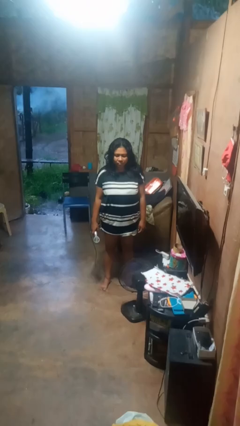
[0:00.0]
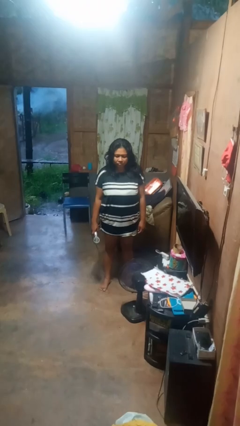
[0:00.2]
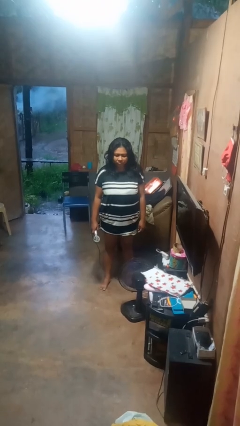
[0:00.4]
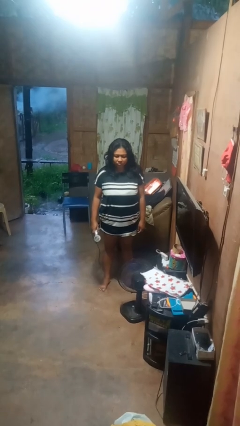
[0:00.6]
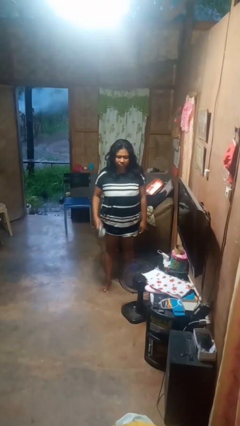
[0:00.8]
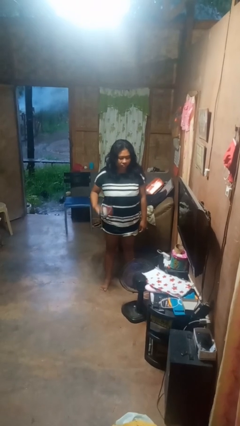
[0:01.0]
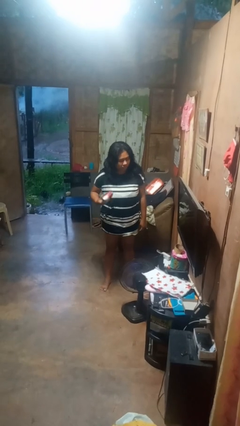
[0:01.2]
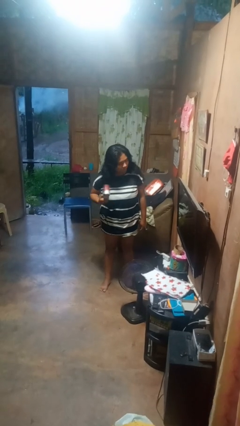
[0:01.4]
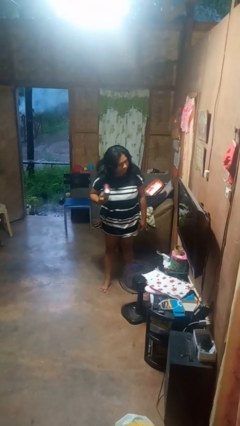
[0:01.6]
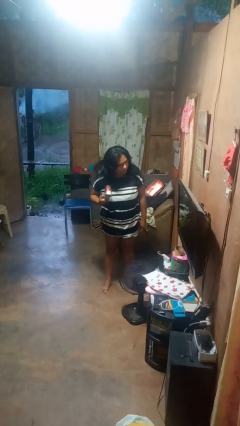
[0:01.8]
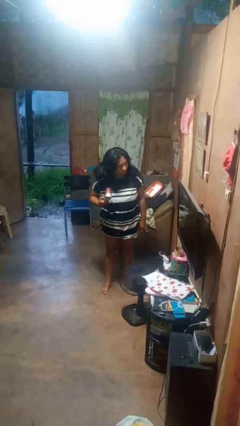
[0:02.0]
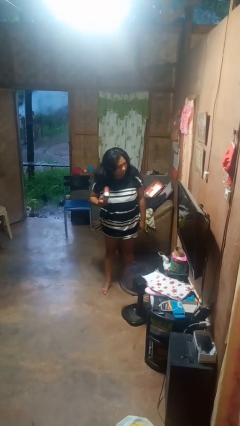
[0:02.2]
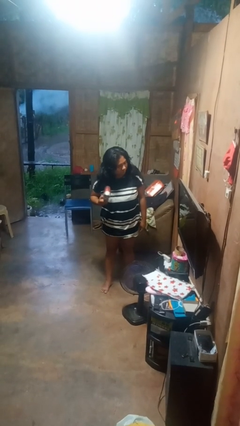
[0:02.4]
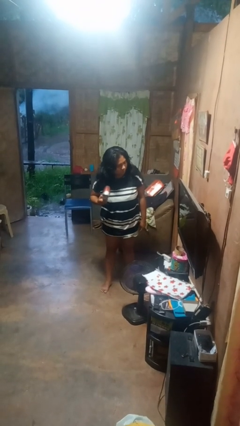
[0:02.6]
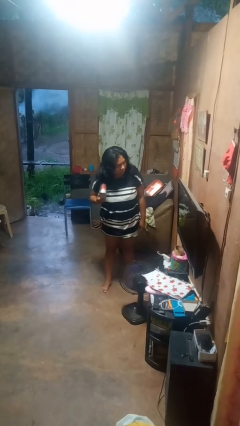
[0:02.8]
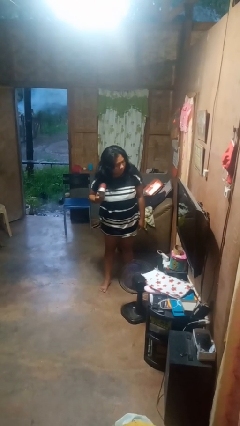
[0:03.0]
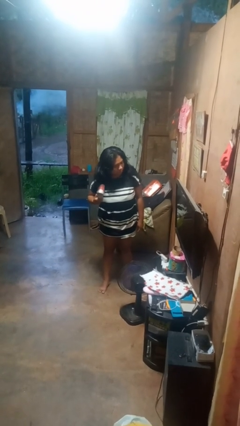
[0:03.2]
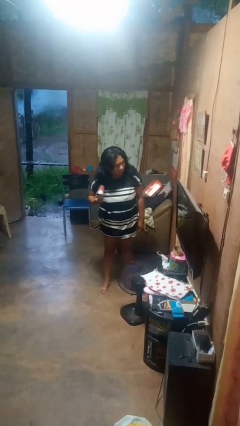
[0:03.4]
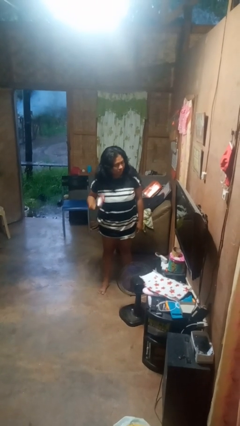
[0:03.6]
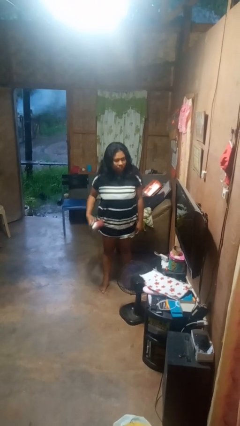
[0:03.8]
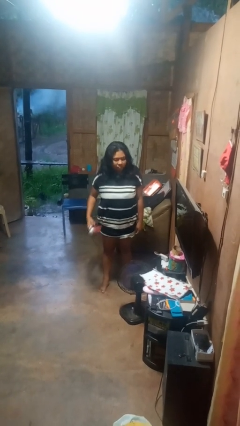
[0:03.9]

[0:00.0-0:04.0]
person dries hair with hairdryer

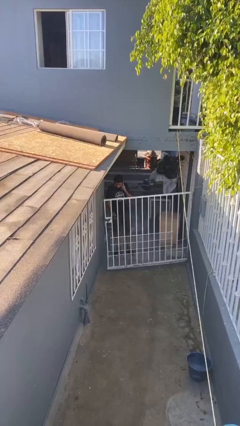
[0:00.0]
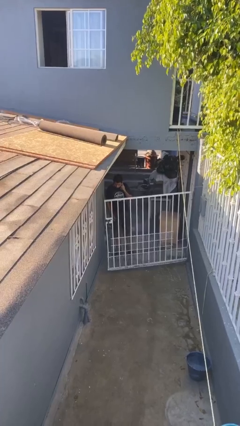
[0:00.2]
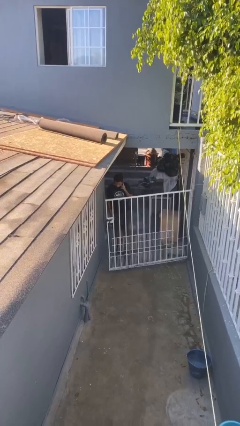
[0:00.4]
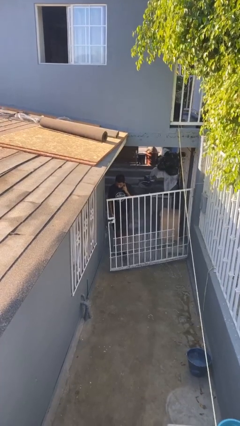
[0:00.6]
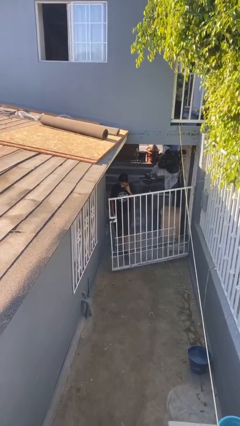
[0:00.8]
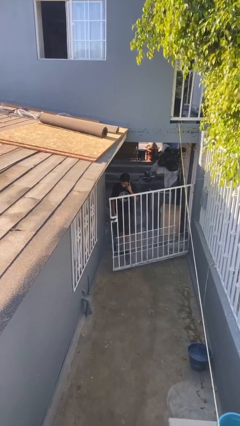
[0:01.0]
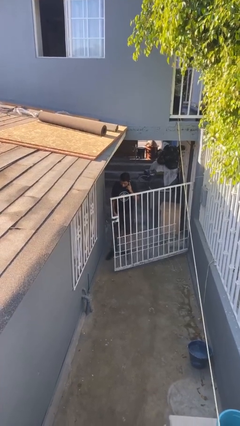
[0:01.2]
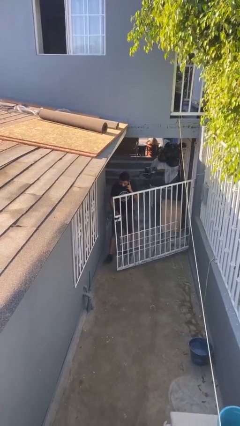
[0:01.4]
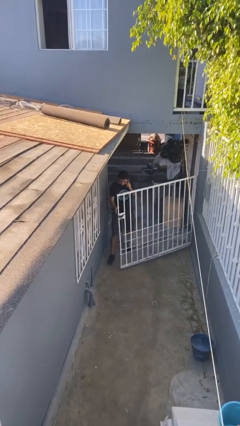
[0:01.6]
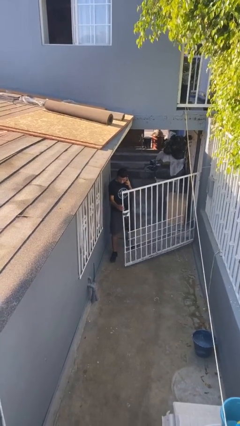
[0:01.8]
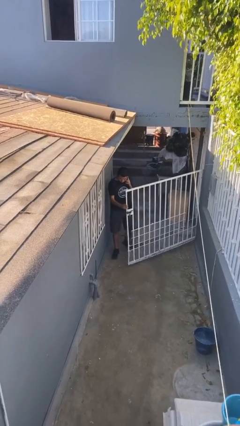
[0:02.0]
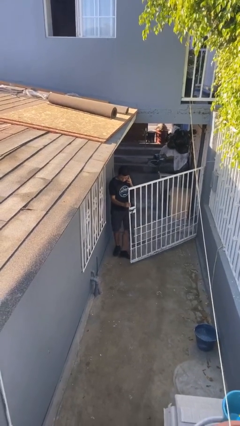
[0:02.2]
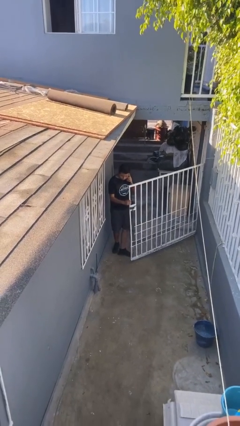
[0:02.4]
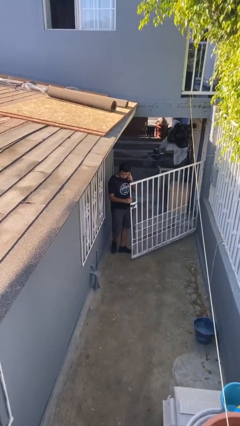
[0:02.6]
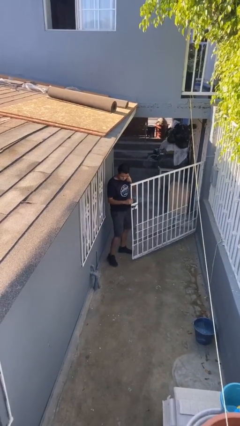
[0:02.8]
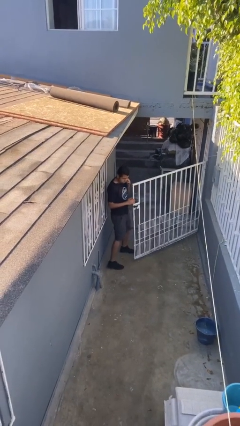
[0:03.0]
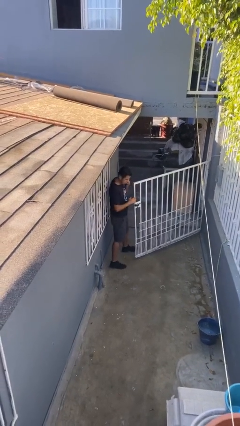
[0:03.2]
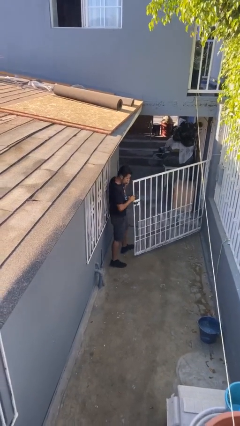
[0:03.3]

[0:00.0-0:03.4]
person enters scene through structure

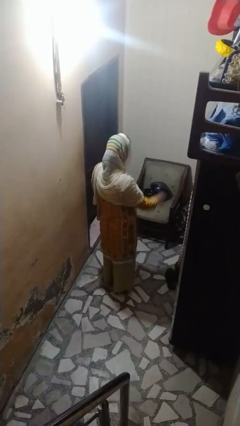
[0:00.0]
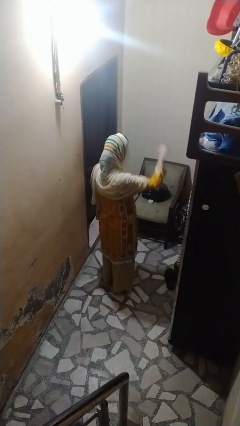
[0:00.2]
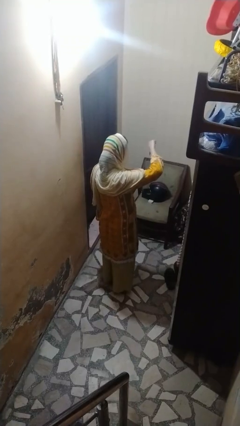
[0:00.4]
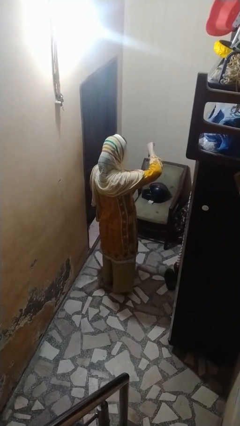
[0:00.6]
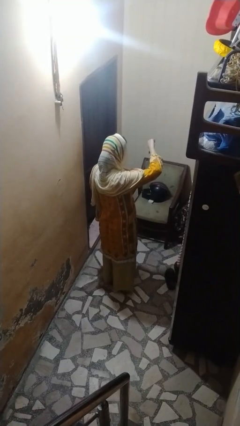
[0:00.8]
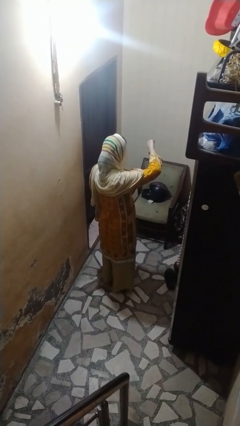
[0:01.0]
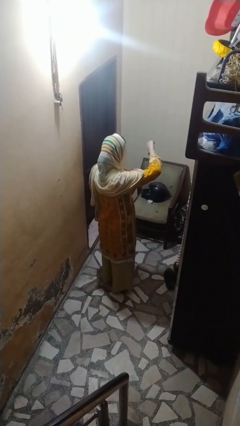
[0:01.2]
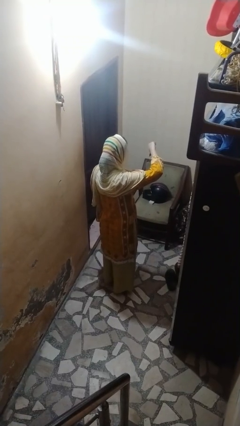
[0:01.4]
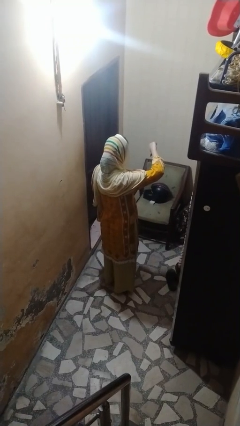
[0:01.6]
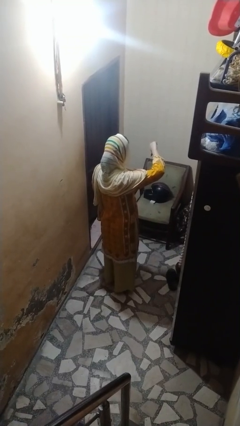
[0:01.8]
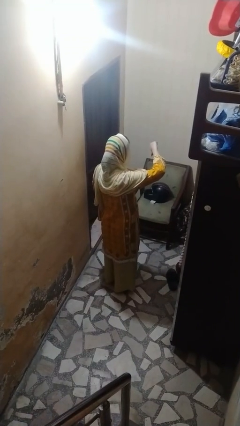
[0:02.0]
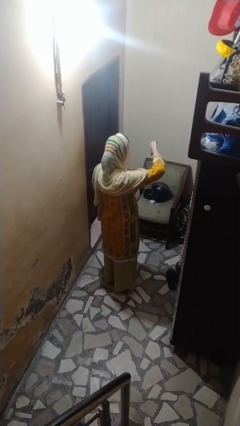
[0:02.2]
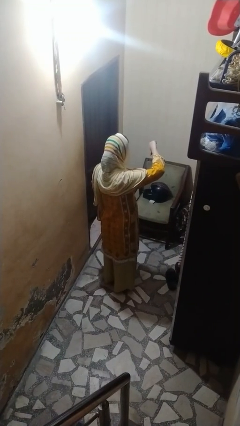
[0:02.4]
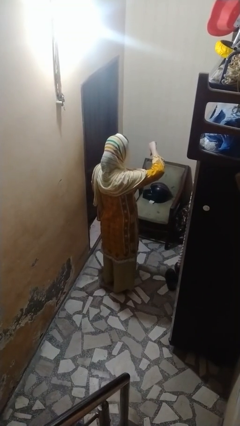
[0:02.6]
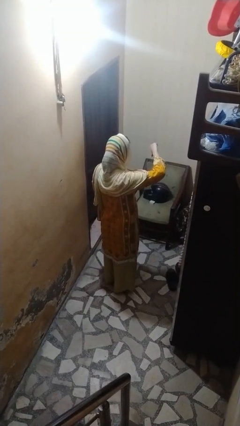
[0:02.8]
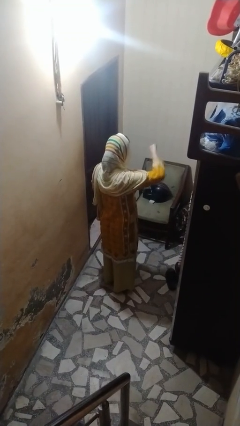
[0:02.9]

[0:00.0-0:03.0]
person gestures thumbs down

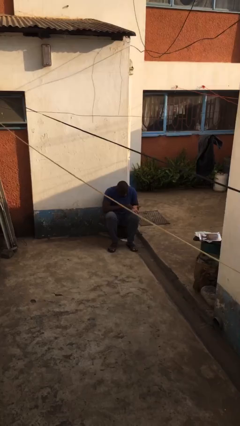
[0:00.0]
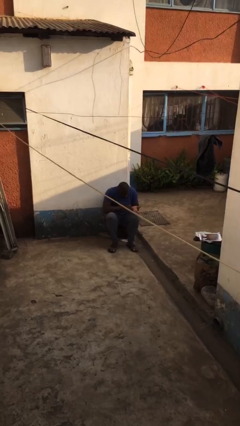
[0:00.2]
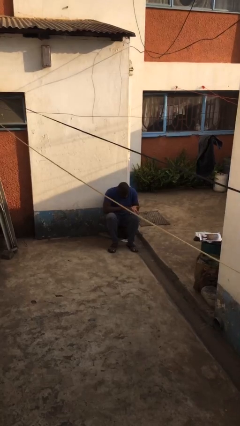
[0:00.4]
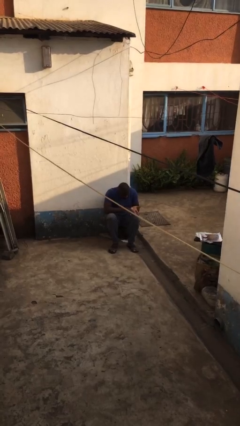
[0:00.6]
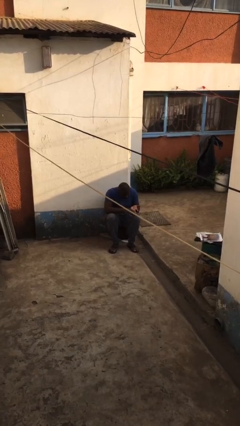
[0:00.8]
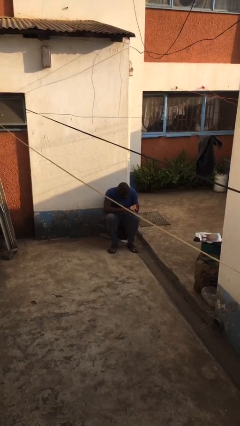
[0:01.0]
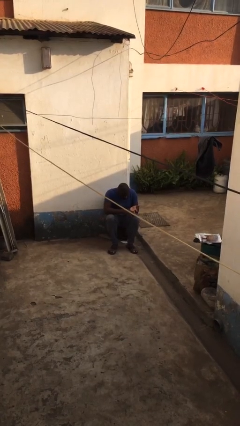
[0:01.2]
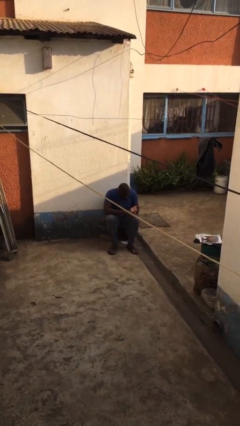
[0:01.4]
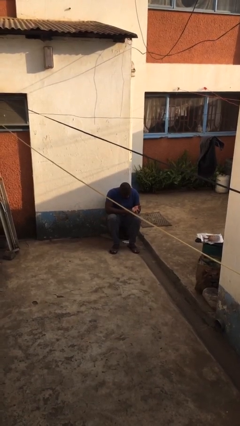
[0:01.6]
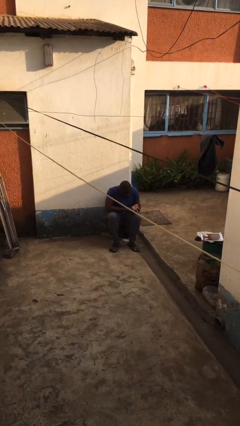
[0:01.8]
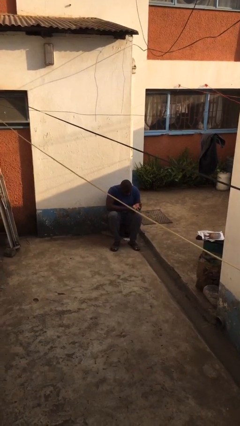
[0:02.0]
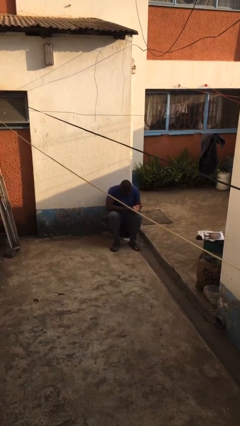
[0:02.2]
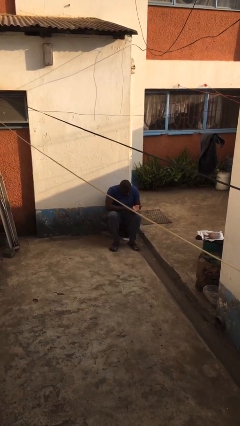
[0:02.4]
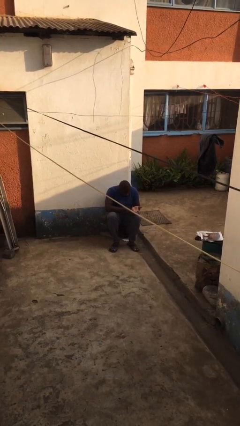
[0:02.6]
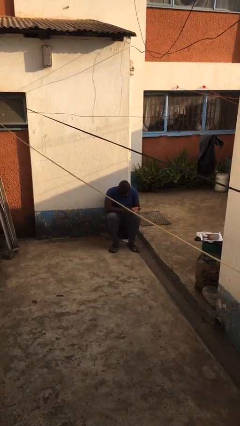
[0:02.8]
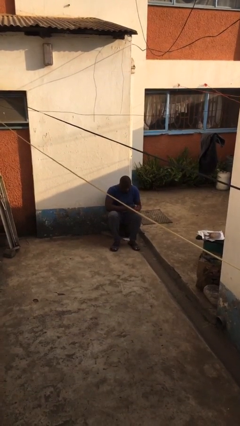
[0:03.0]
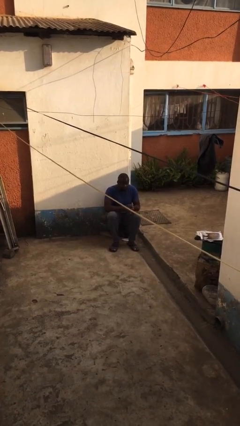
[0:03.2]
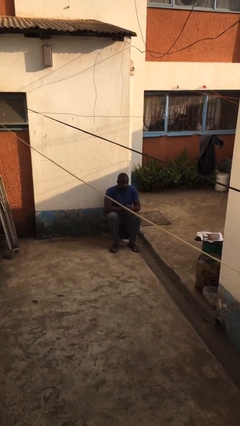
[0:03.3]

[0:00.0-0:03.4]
person looks at hands in lap

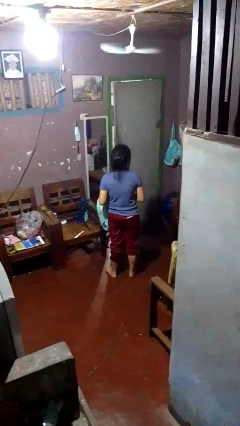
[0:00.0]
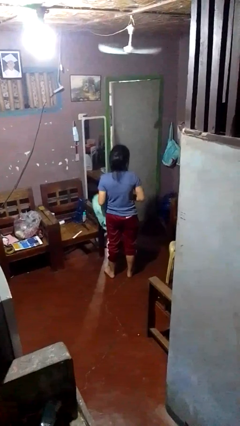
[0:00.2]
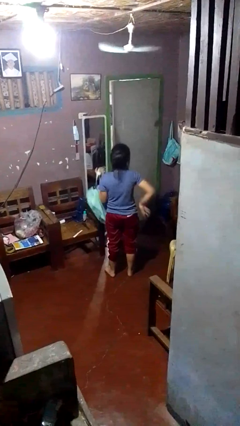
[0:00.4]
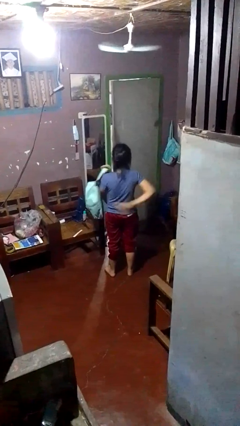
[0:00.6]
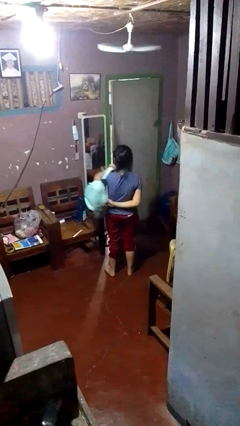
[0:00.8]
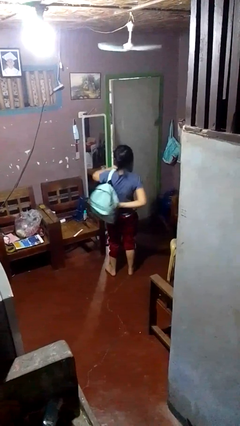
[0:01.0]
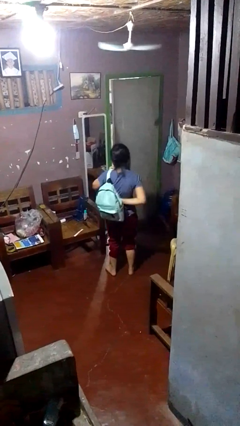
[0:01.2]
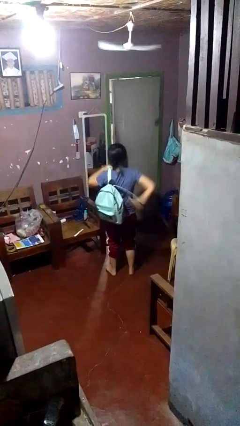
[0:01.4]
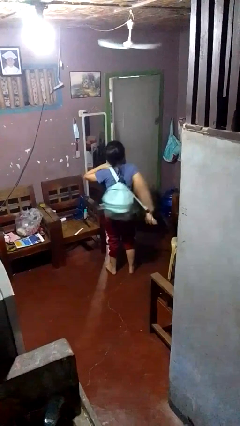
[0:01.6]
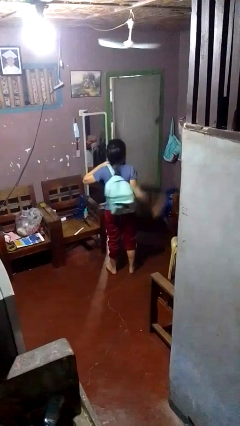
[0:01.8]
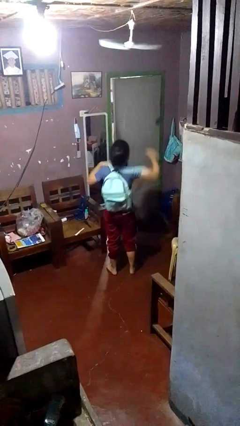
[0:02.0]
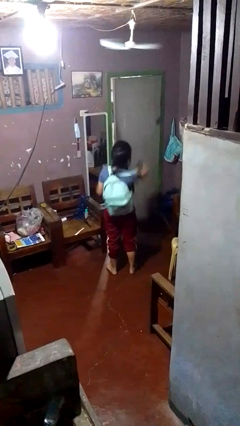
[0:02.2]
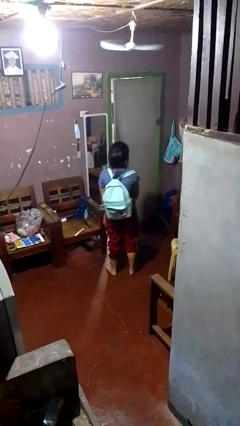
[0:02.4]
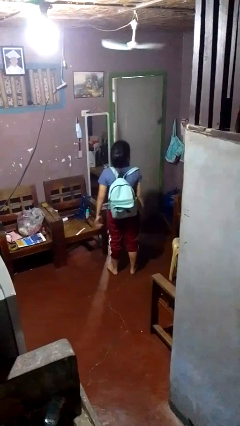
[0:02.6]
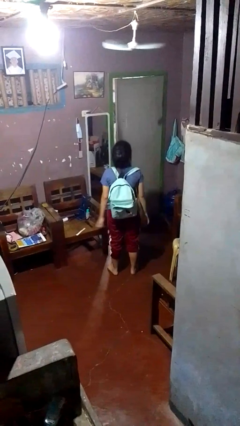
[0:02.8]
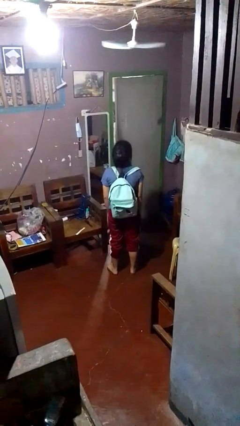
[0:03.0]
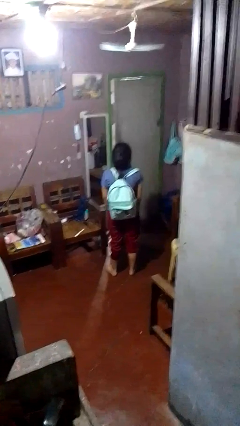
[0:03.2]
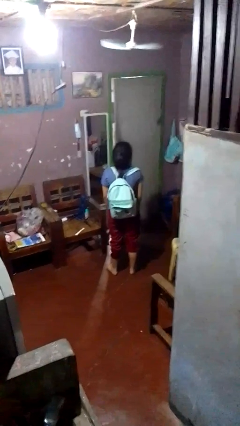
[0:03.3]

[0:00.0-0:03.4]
person puts on backpack

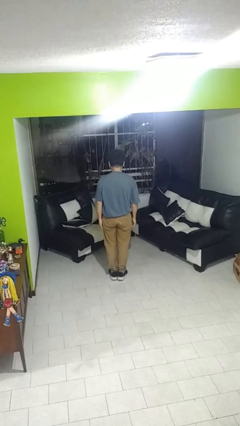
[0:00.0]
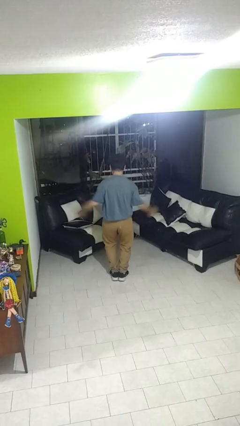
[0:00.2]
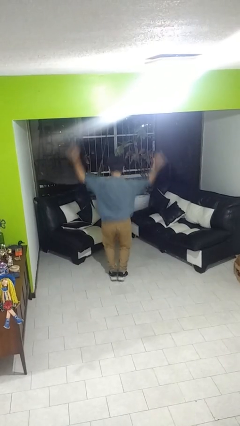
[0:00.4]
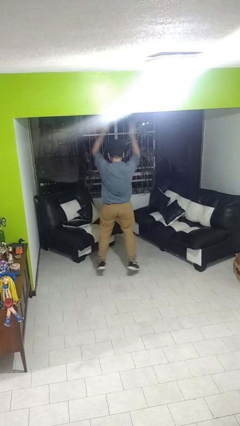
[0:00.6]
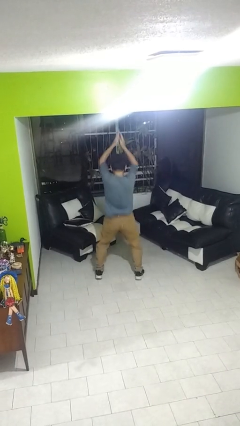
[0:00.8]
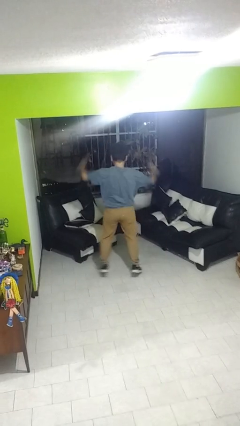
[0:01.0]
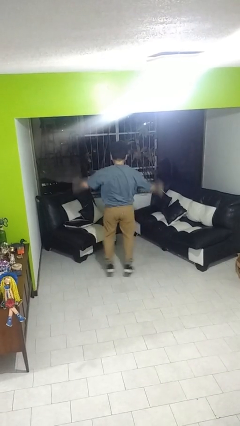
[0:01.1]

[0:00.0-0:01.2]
person exercises with jumping jacks
